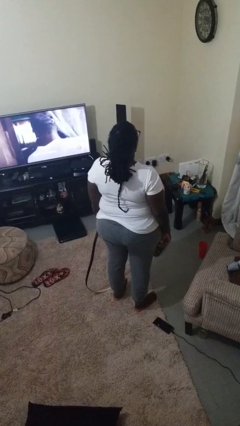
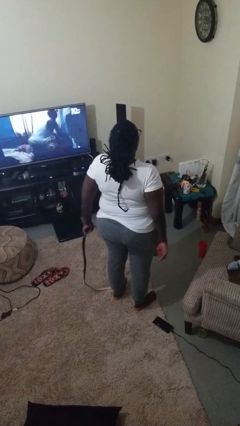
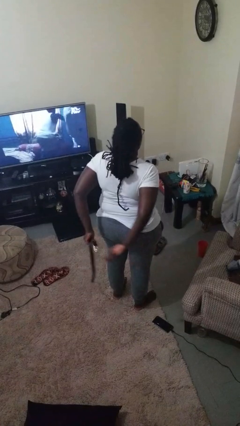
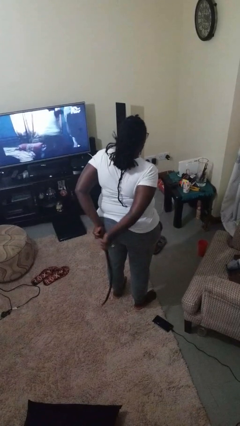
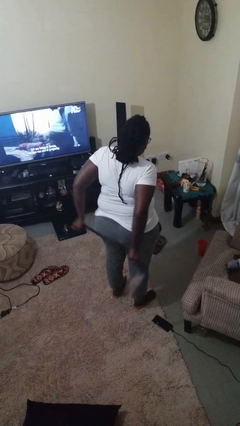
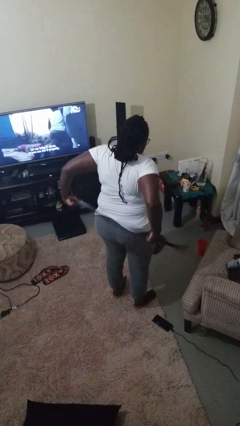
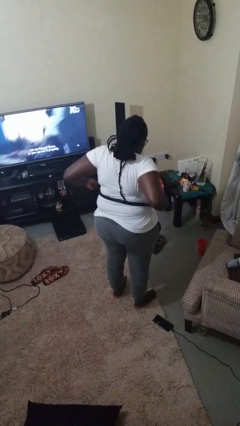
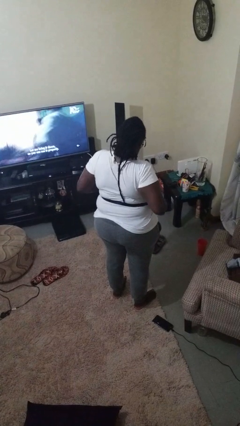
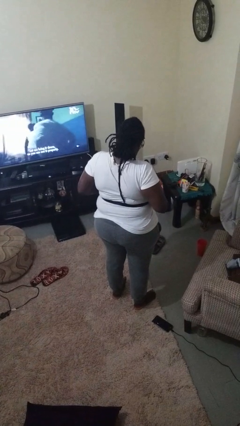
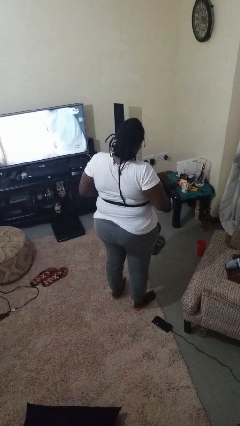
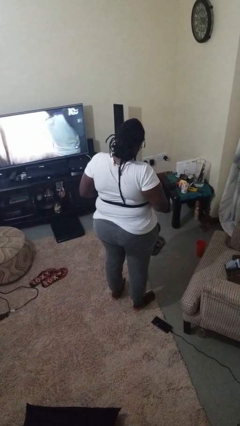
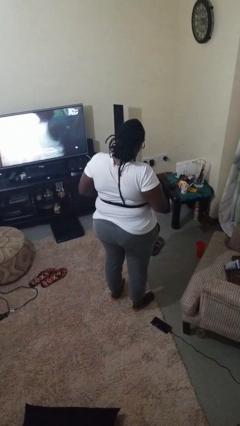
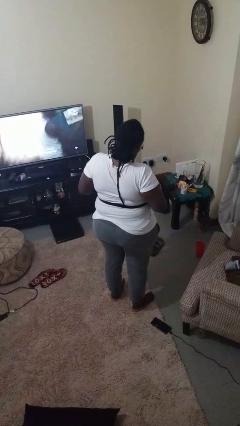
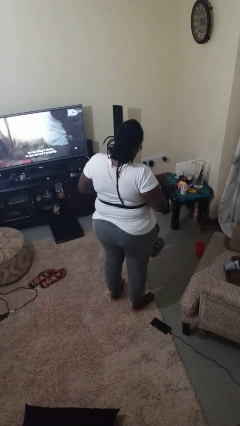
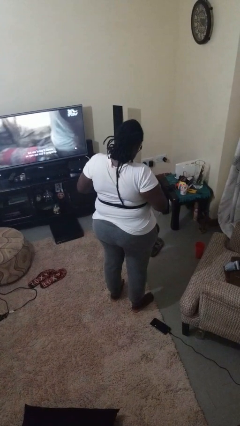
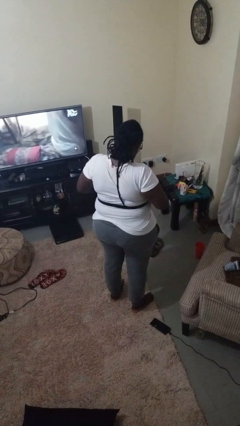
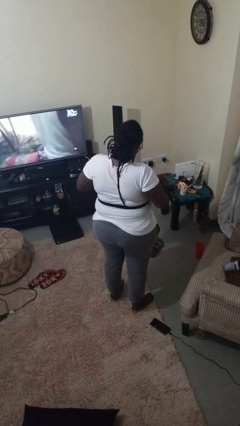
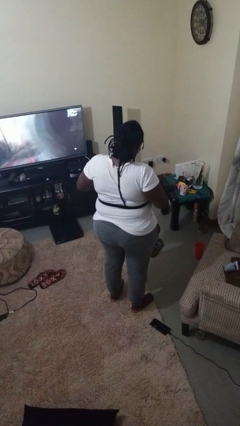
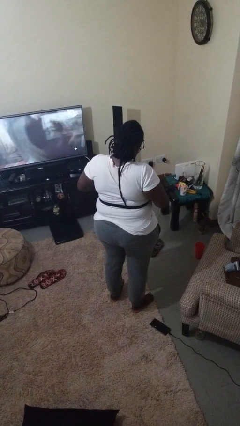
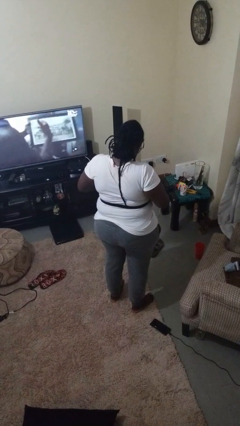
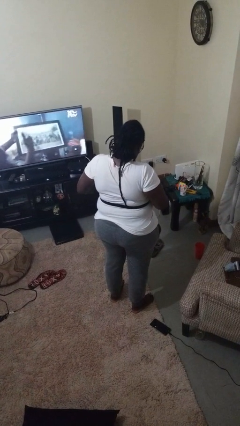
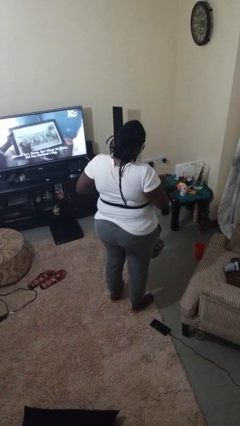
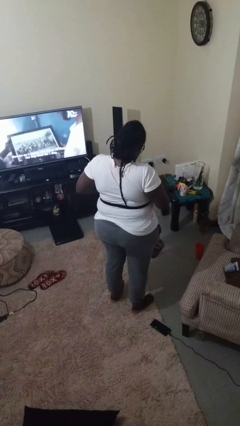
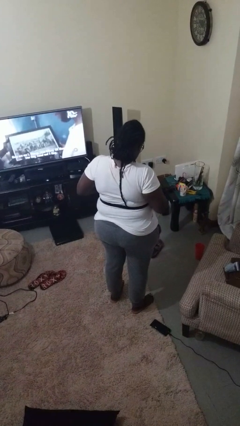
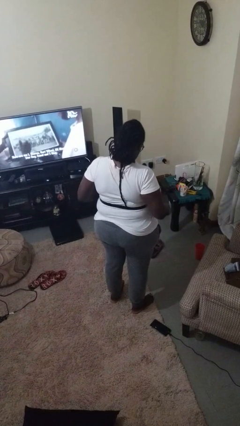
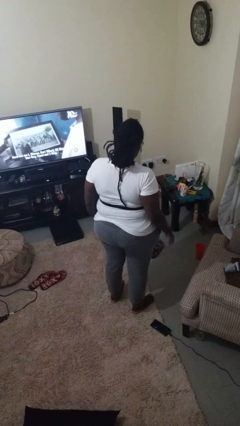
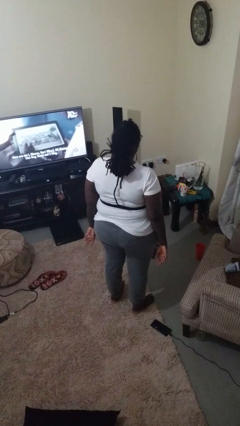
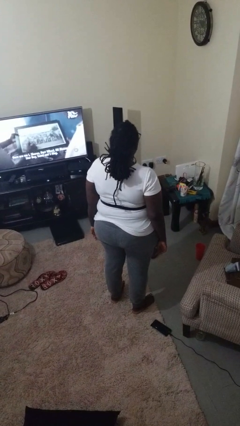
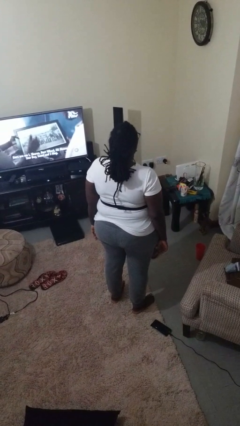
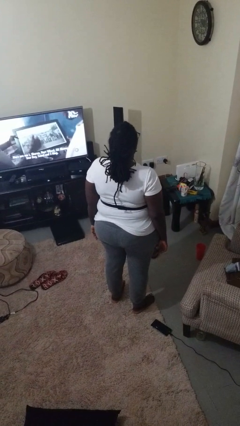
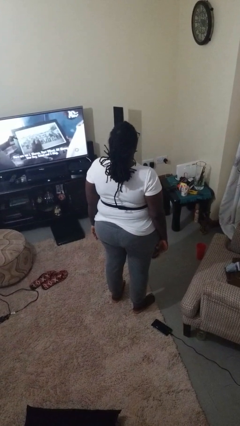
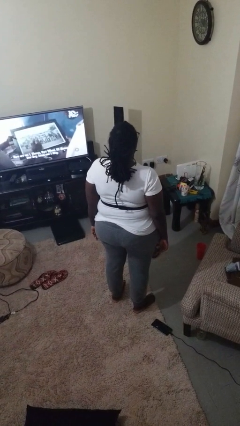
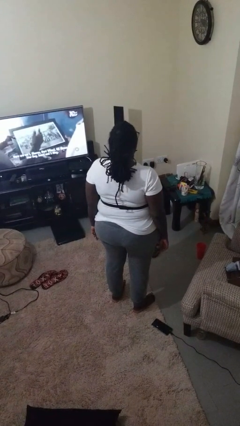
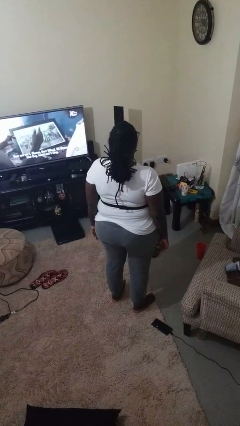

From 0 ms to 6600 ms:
person puts on belt

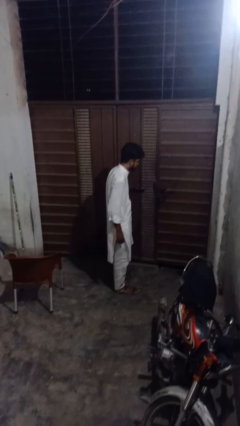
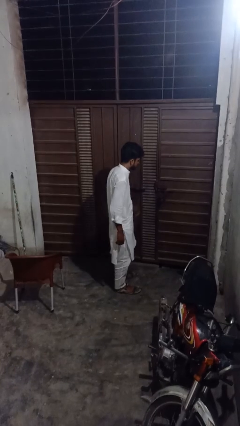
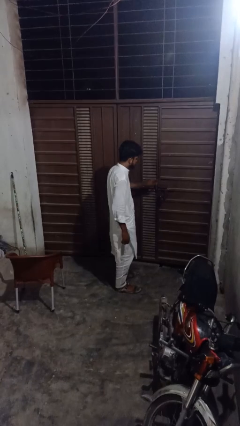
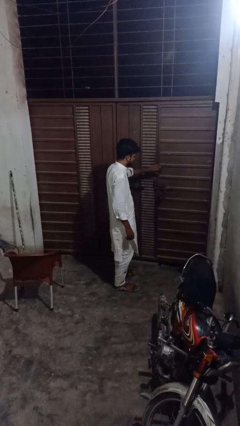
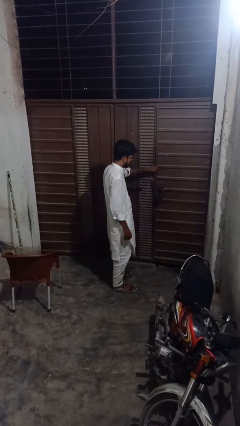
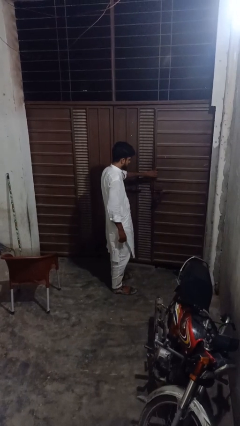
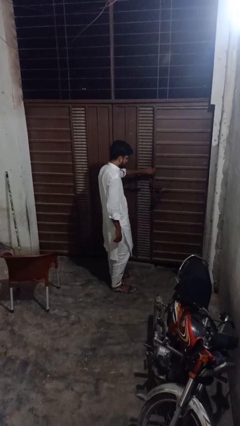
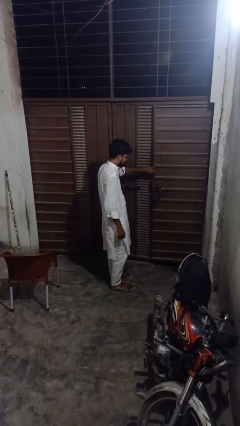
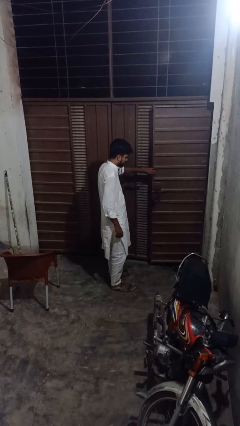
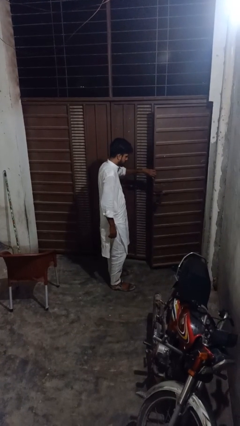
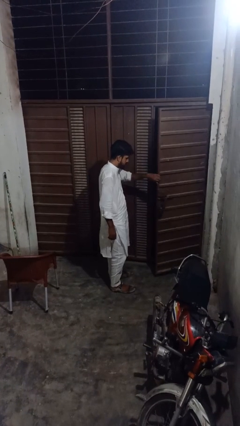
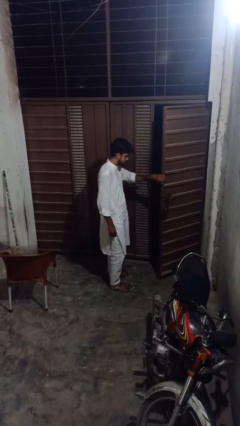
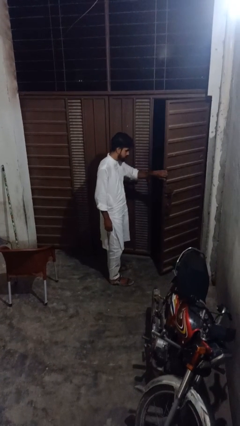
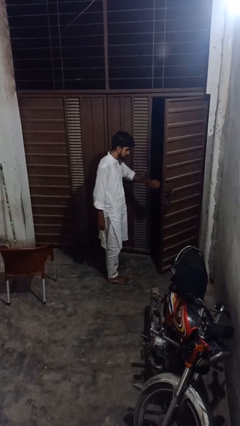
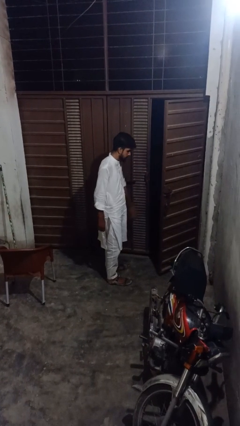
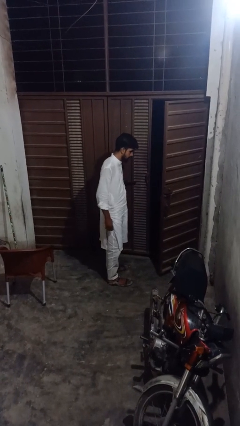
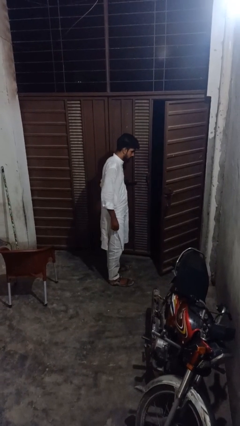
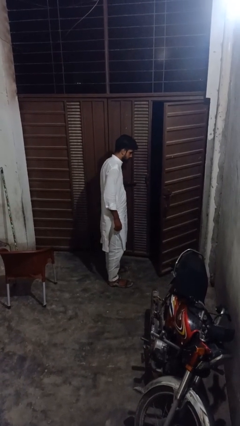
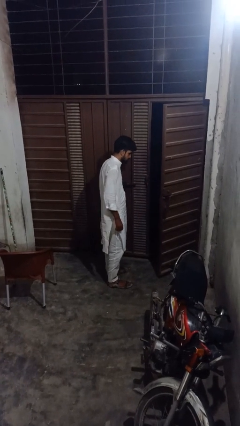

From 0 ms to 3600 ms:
person opens facility door

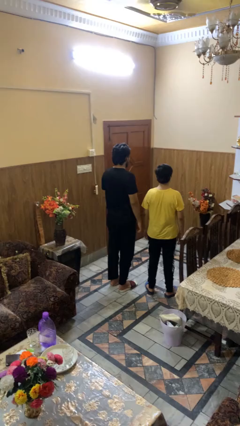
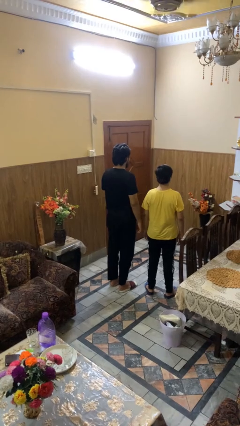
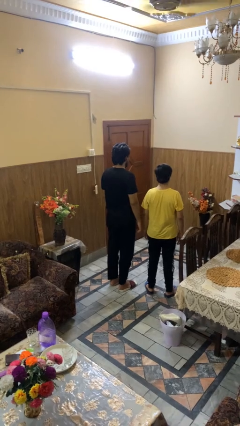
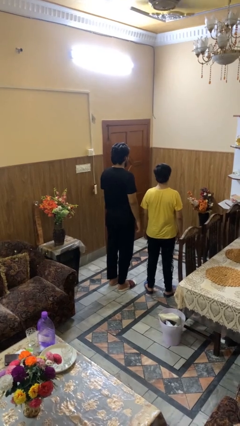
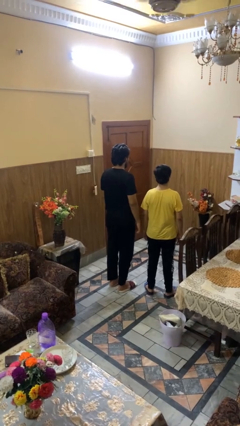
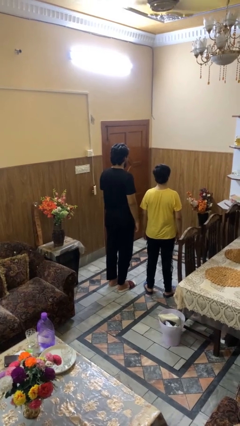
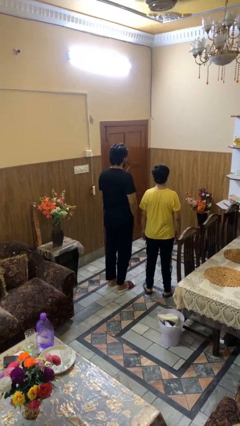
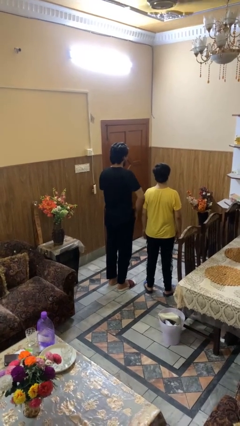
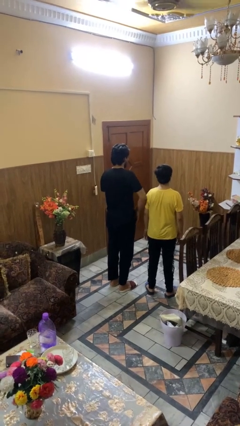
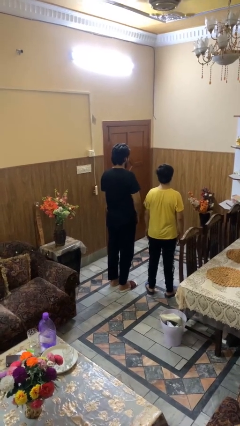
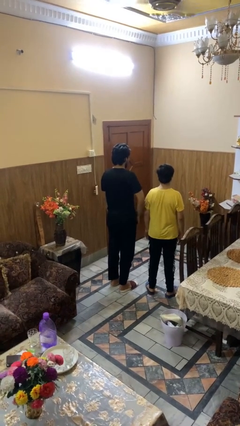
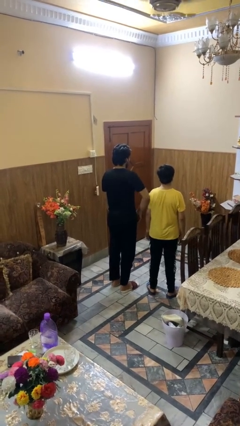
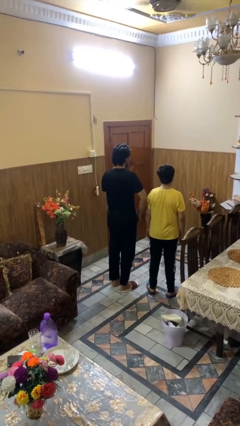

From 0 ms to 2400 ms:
person nudges person with elbow

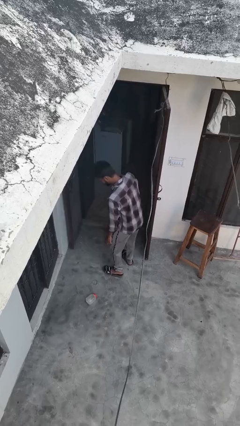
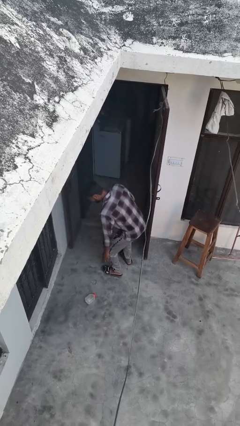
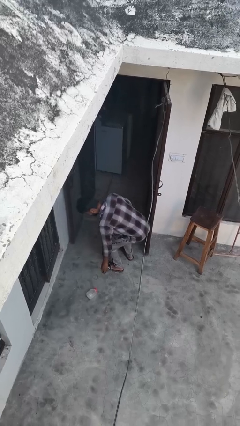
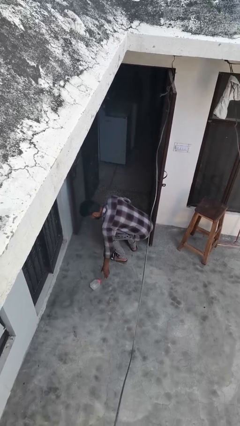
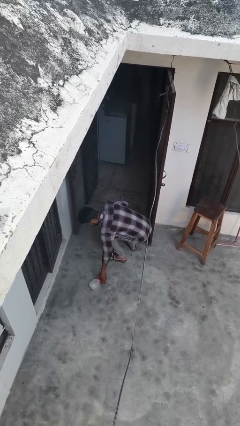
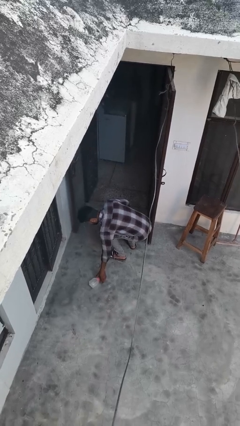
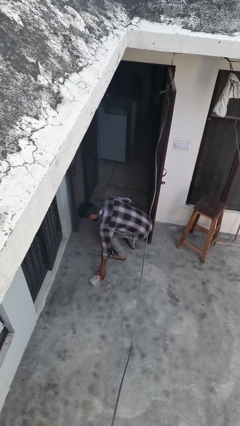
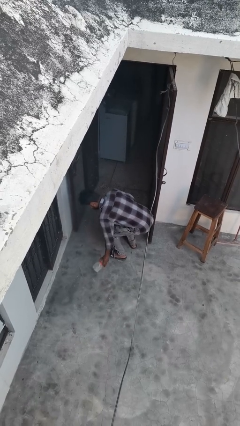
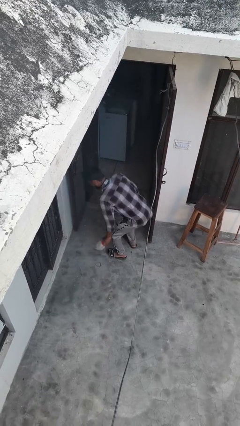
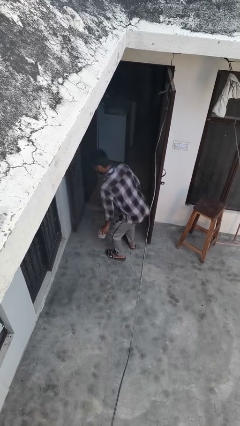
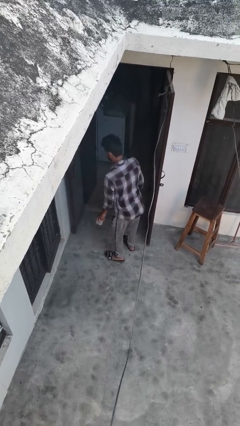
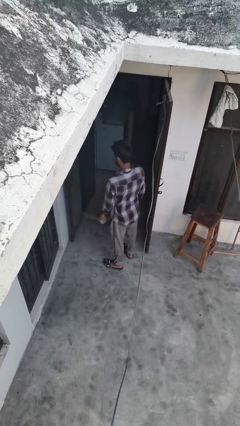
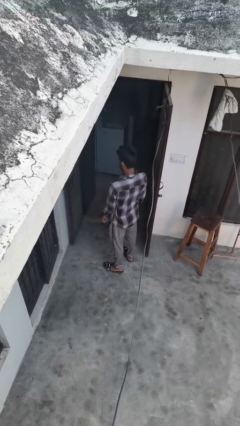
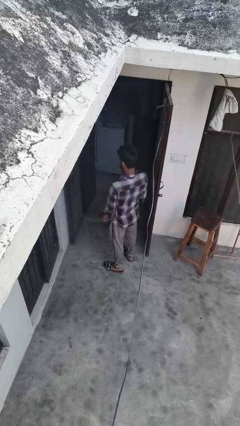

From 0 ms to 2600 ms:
person picks up object from floor

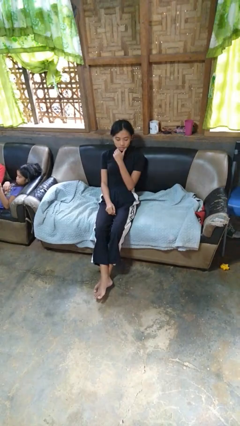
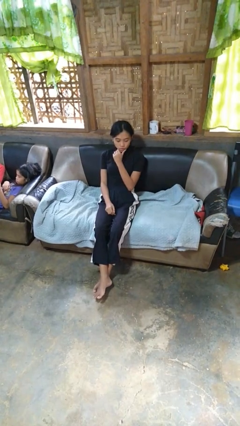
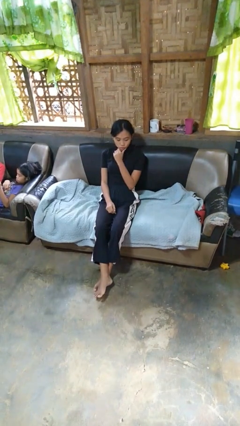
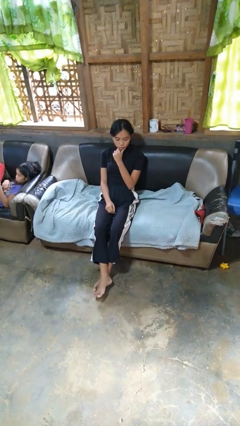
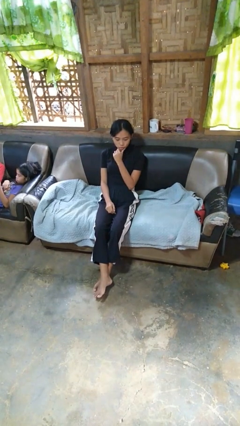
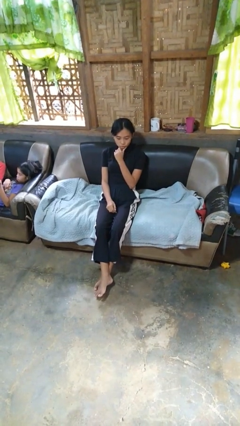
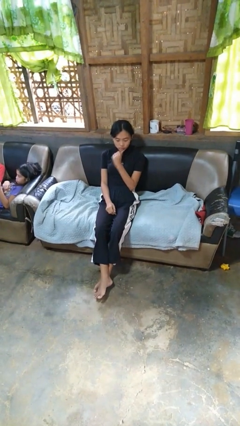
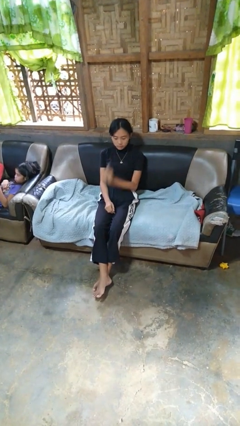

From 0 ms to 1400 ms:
person strokes chin

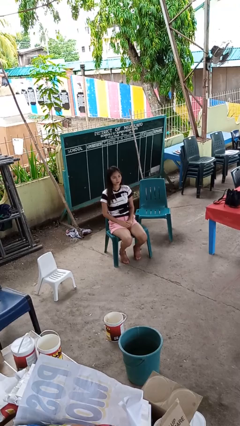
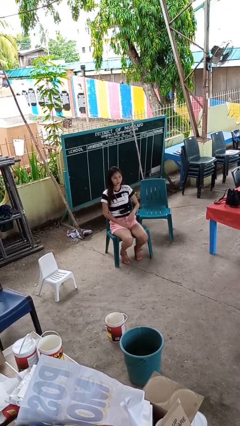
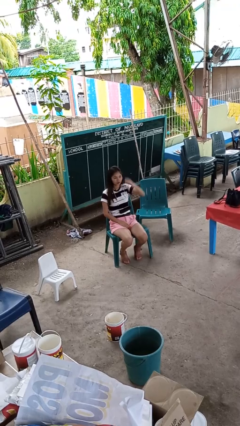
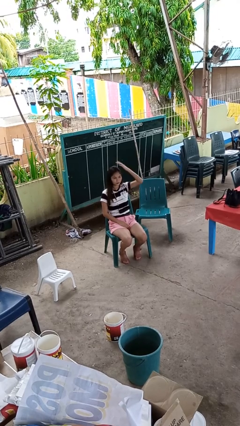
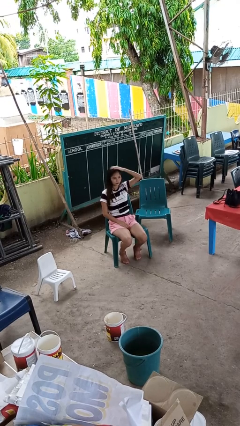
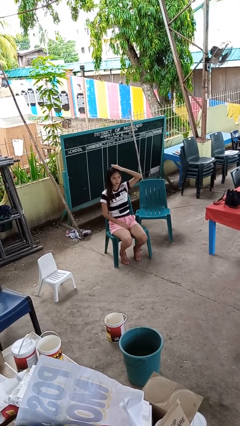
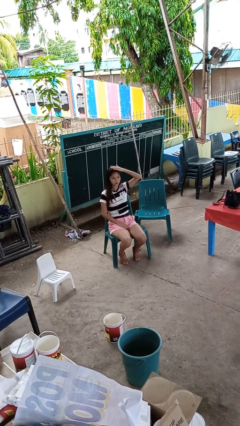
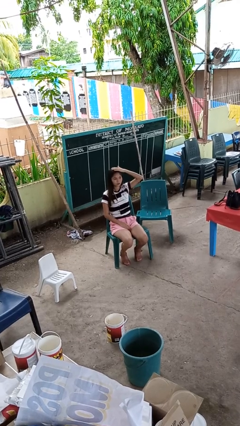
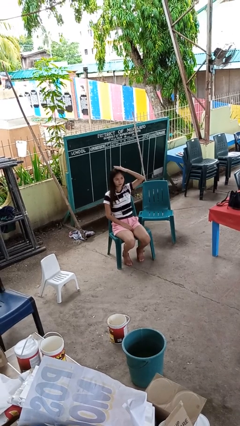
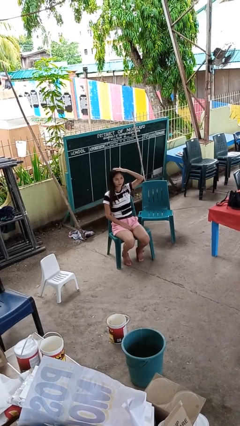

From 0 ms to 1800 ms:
person pats head
